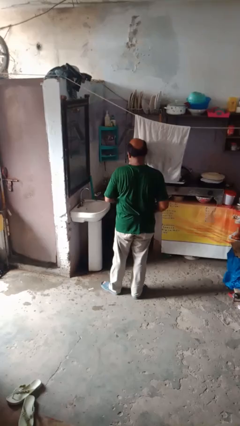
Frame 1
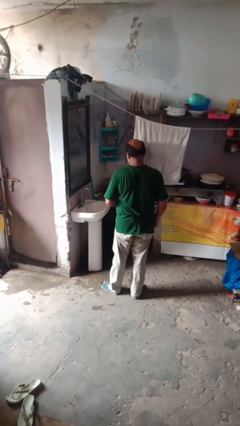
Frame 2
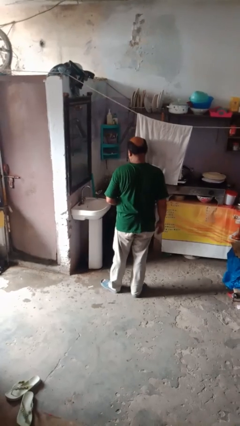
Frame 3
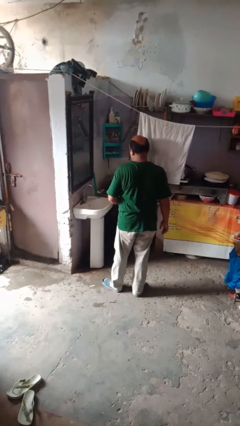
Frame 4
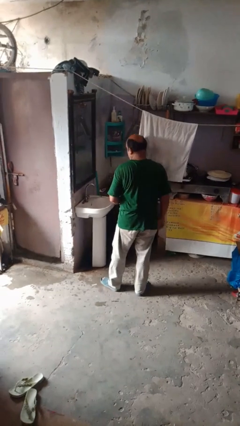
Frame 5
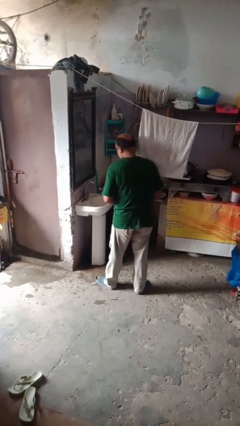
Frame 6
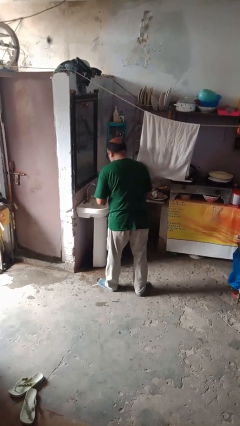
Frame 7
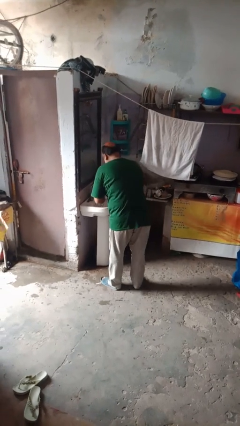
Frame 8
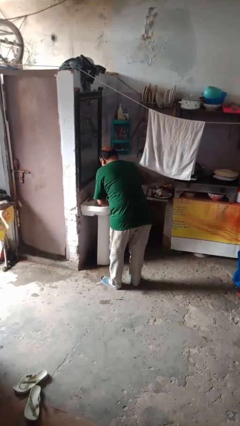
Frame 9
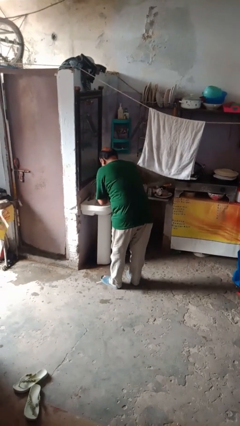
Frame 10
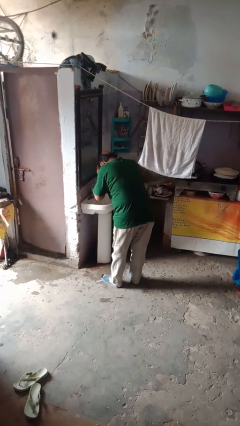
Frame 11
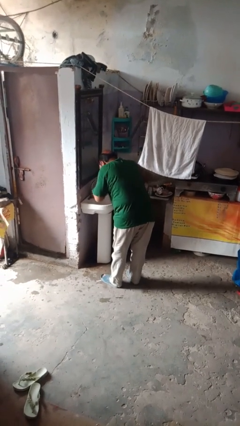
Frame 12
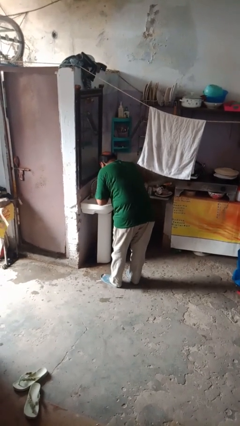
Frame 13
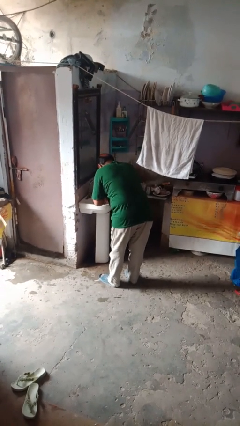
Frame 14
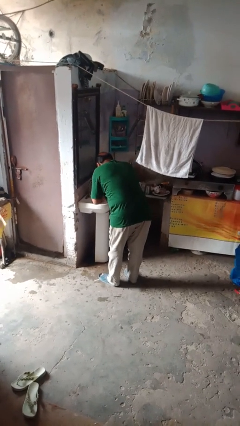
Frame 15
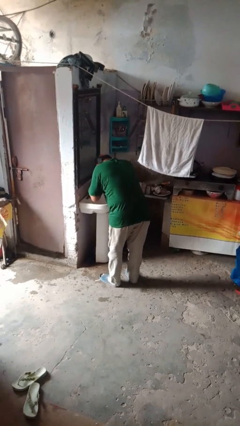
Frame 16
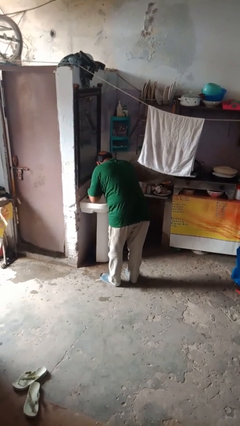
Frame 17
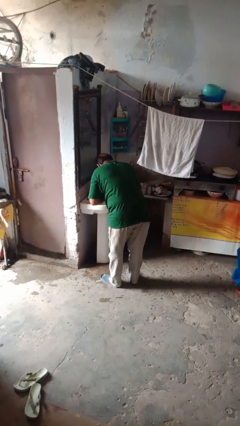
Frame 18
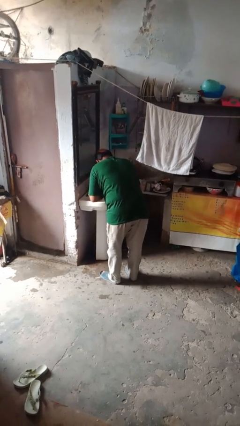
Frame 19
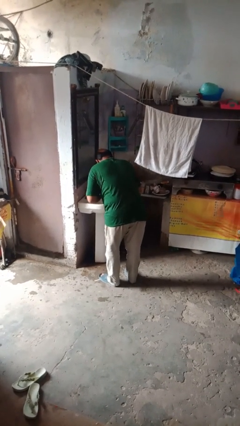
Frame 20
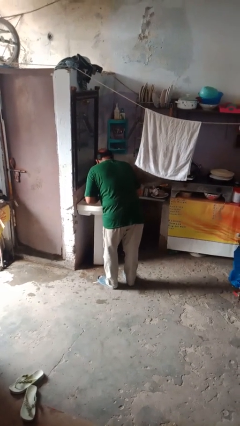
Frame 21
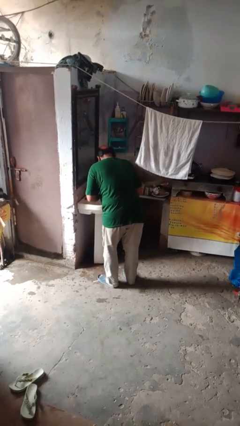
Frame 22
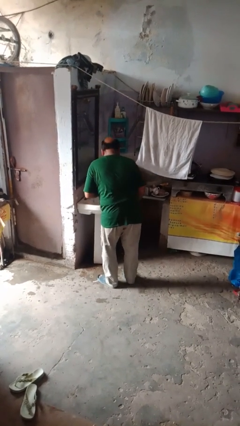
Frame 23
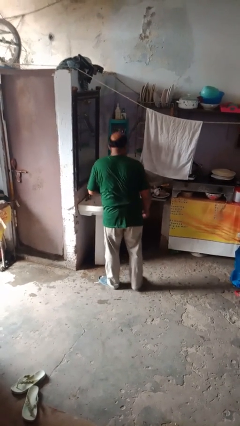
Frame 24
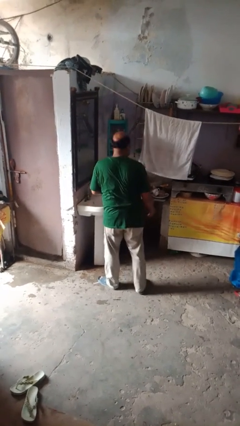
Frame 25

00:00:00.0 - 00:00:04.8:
person washes face

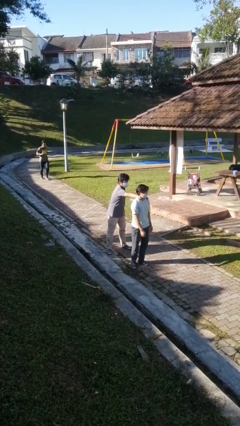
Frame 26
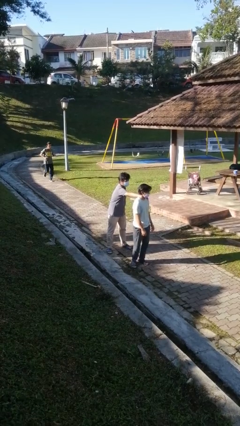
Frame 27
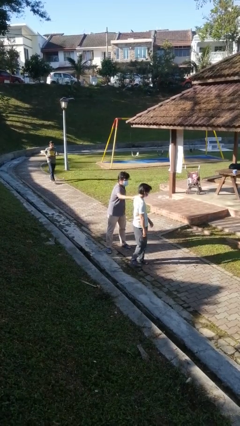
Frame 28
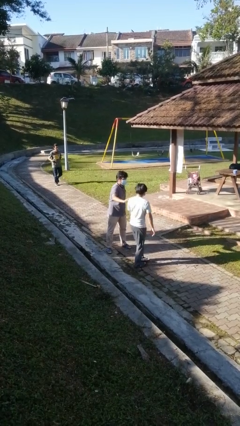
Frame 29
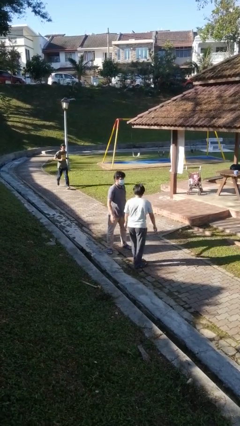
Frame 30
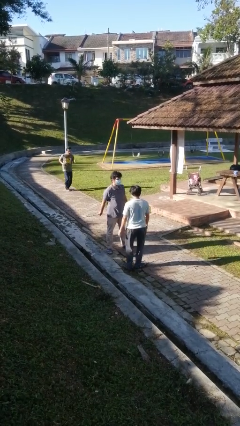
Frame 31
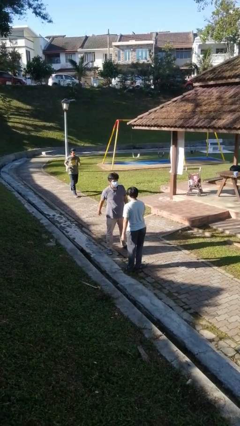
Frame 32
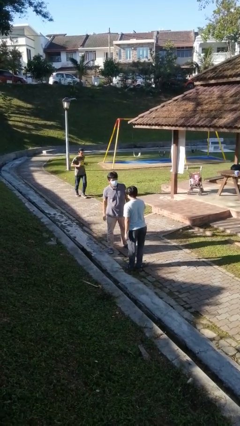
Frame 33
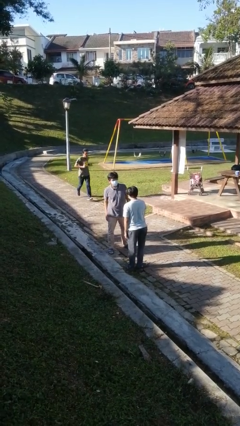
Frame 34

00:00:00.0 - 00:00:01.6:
person spins person around

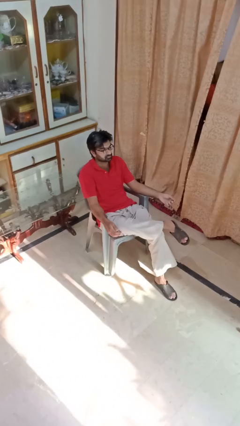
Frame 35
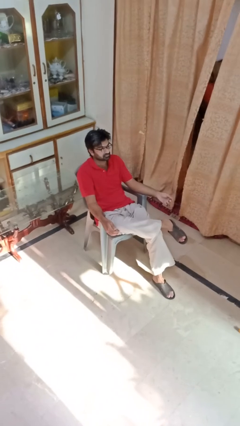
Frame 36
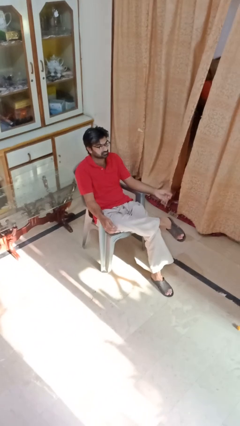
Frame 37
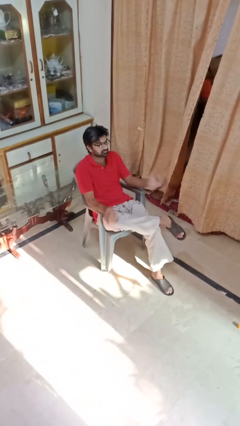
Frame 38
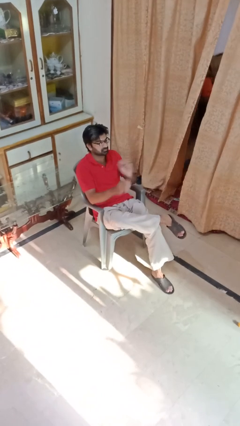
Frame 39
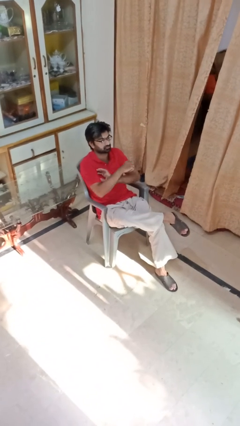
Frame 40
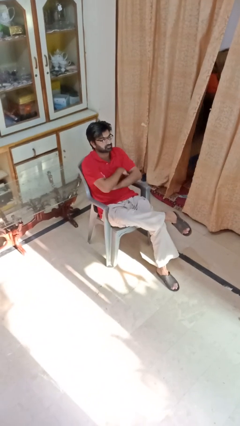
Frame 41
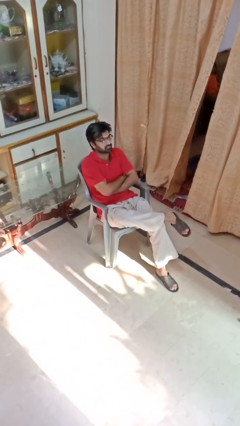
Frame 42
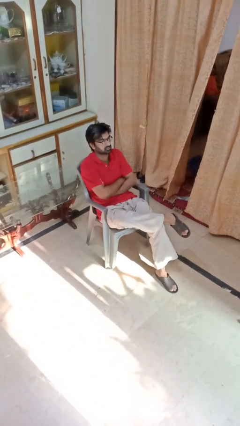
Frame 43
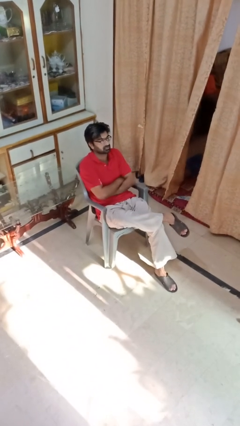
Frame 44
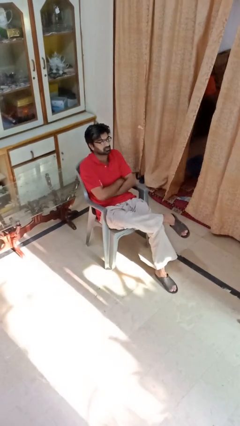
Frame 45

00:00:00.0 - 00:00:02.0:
person crosses arms

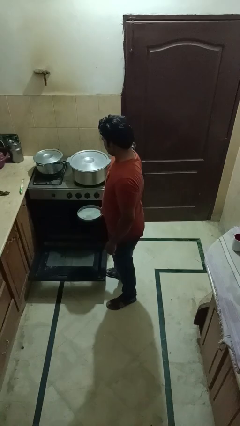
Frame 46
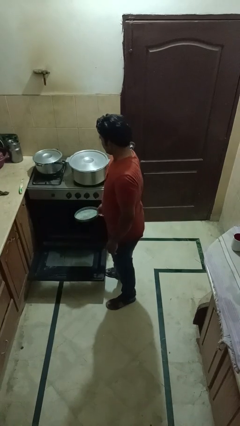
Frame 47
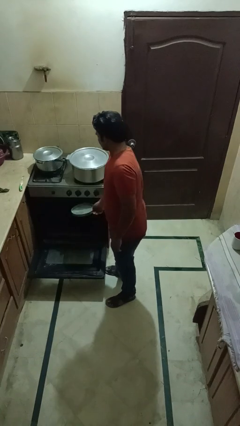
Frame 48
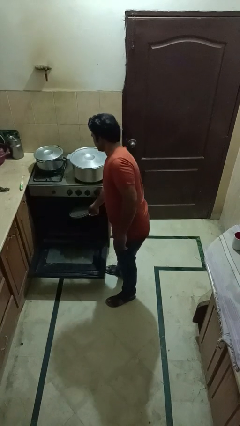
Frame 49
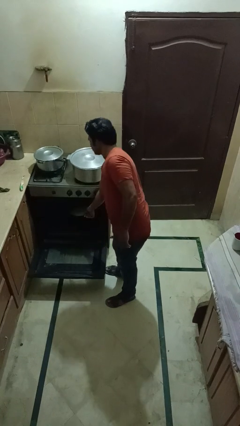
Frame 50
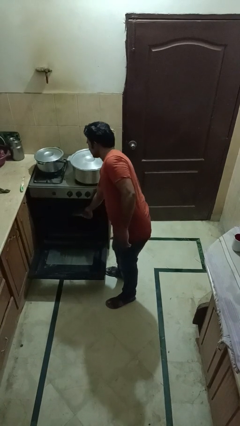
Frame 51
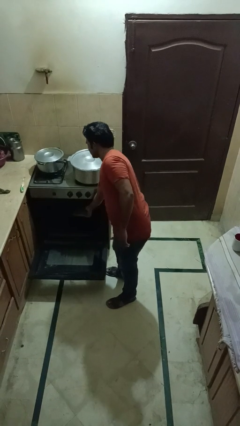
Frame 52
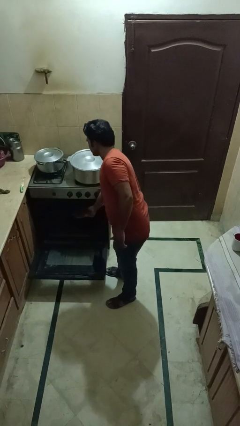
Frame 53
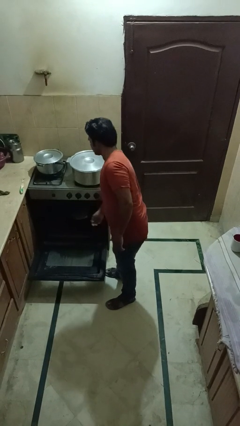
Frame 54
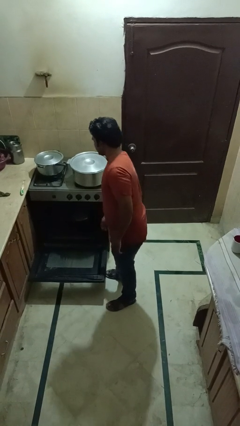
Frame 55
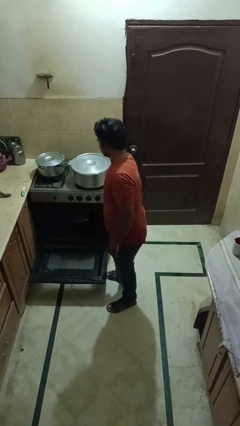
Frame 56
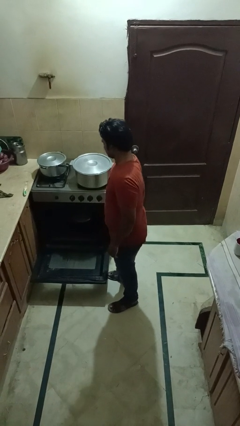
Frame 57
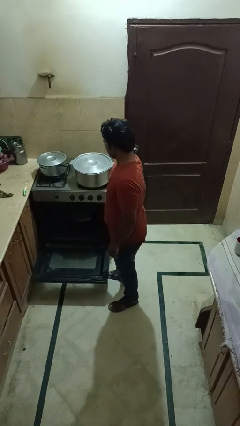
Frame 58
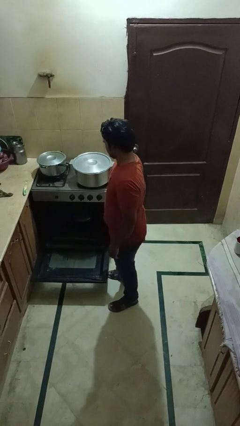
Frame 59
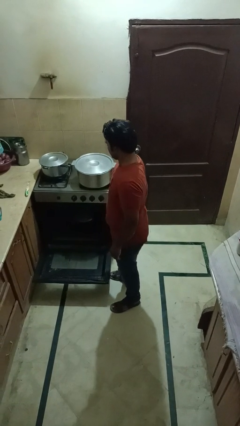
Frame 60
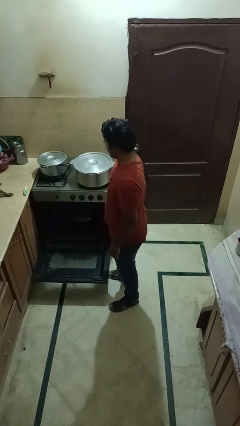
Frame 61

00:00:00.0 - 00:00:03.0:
person puts object into oven

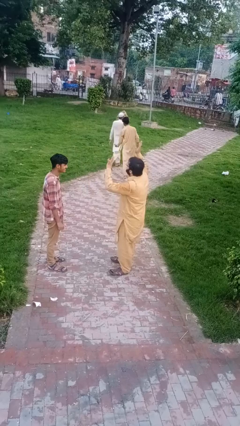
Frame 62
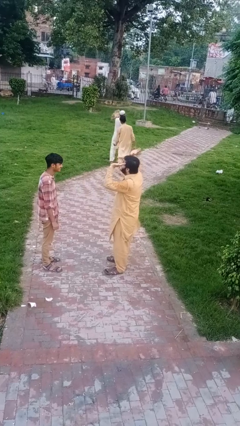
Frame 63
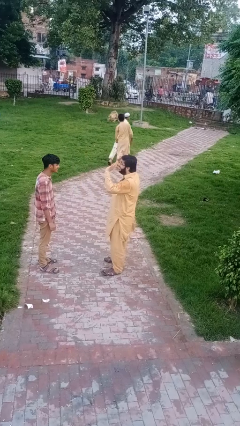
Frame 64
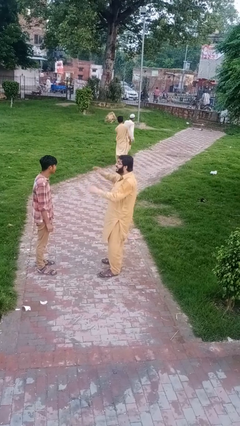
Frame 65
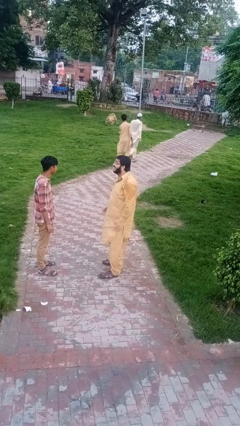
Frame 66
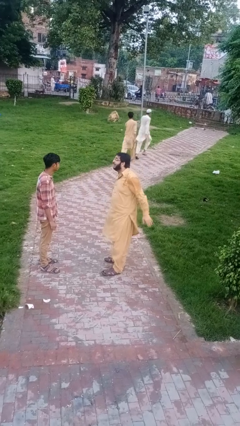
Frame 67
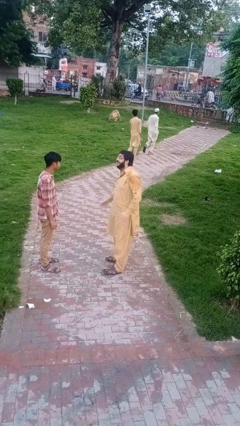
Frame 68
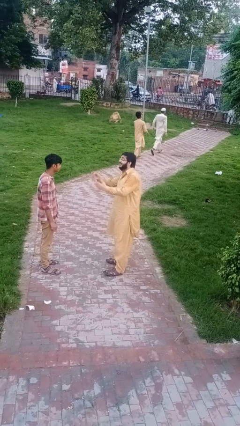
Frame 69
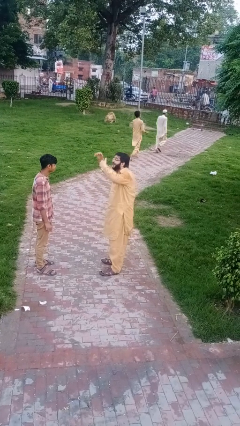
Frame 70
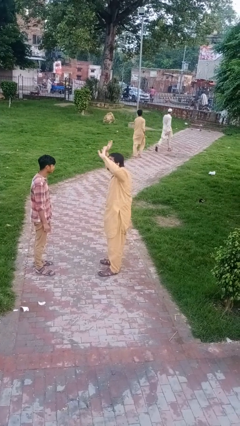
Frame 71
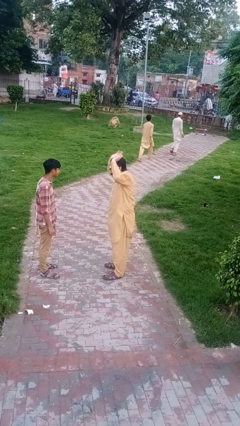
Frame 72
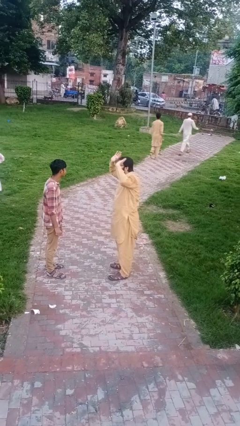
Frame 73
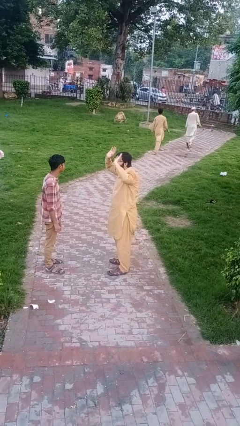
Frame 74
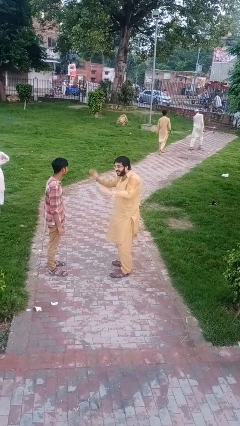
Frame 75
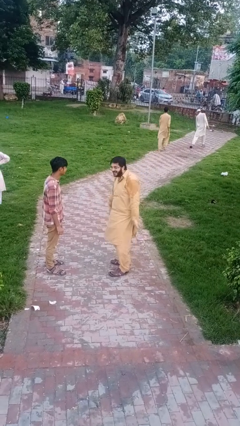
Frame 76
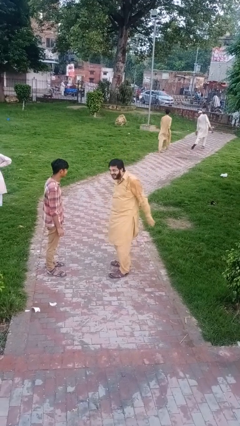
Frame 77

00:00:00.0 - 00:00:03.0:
person laughs with person

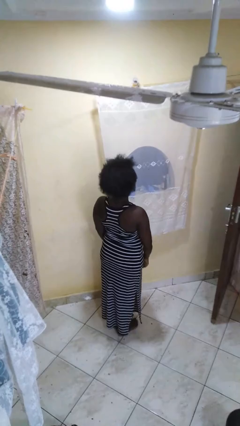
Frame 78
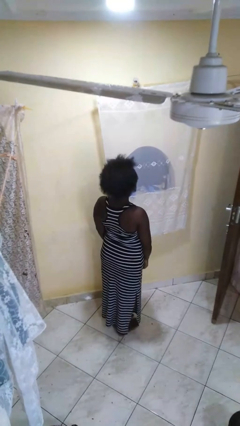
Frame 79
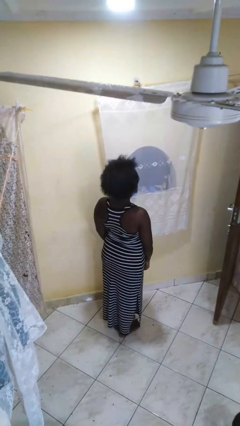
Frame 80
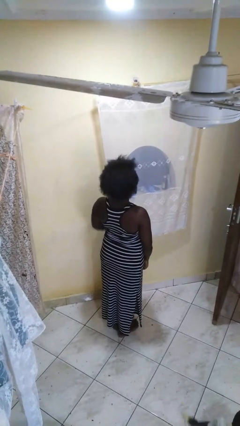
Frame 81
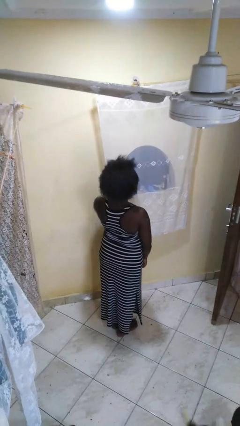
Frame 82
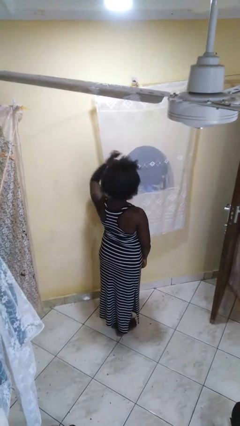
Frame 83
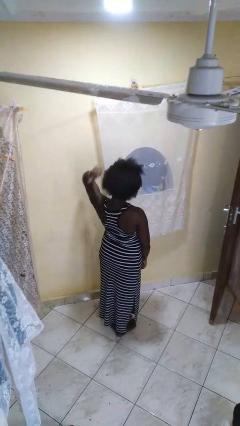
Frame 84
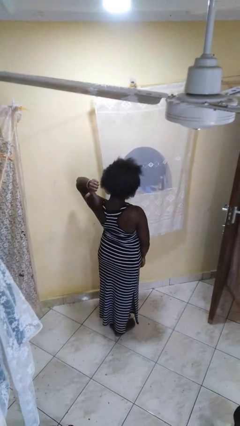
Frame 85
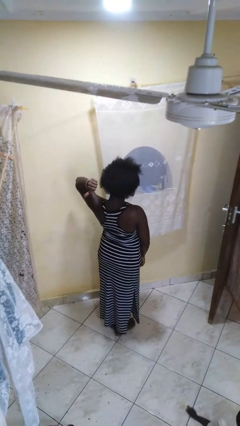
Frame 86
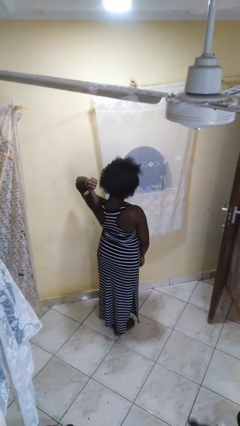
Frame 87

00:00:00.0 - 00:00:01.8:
person gestures behind me

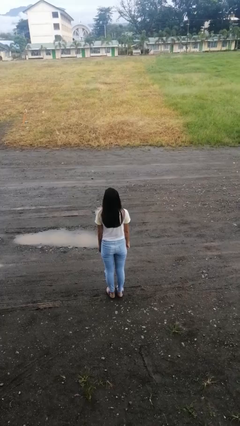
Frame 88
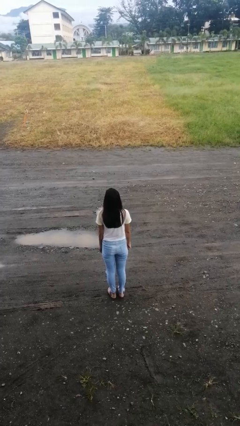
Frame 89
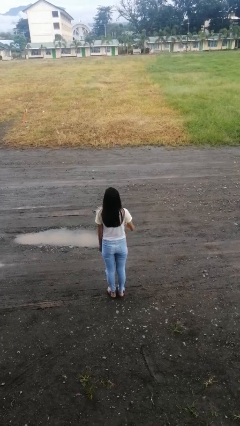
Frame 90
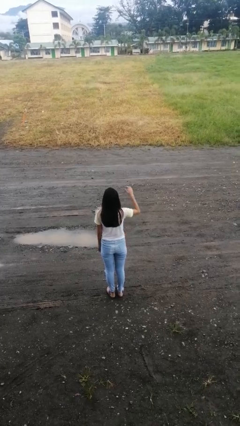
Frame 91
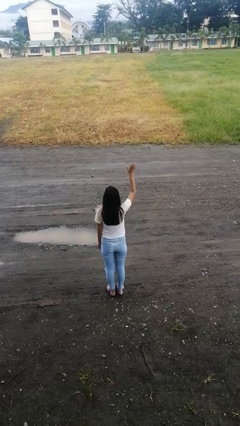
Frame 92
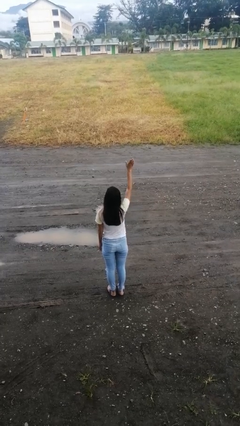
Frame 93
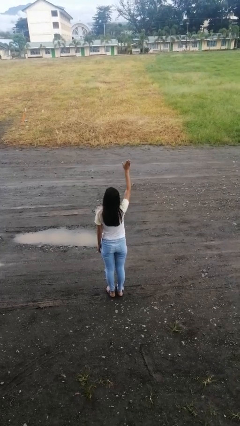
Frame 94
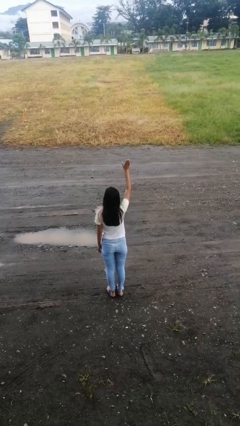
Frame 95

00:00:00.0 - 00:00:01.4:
person gestures raise hand
